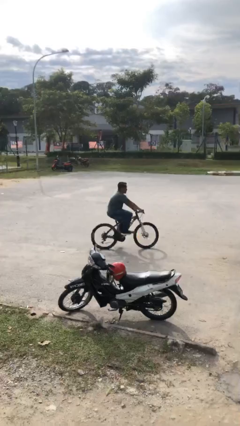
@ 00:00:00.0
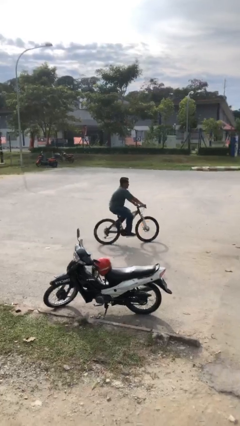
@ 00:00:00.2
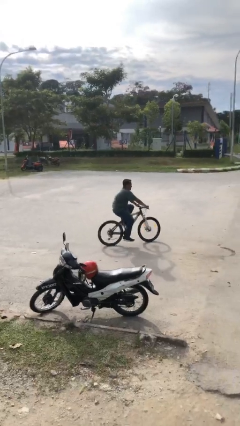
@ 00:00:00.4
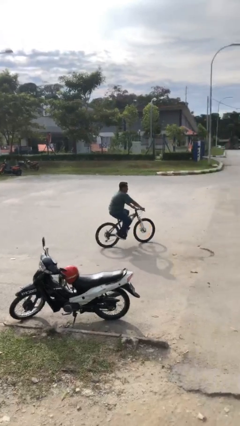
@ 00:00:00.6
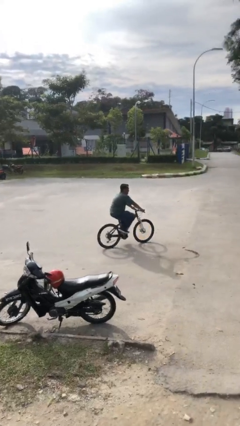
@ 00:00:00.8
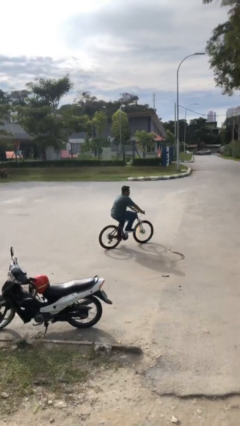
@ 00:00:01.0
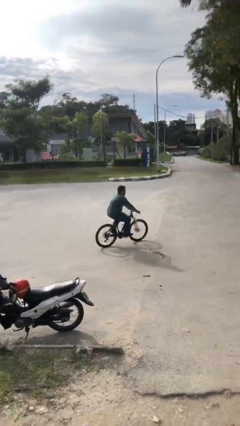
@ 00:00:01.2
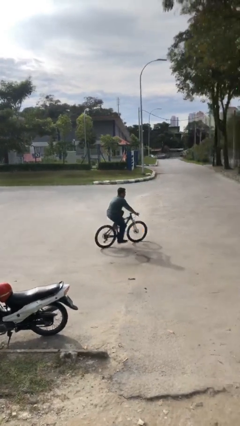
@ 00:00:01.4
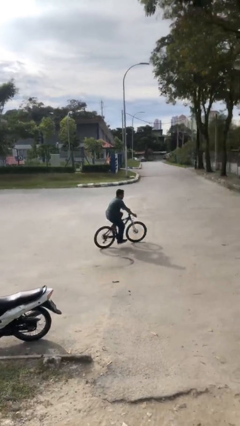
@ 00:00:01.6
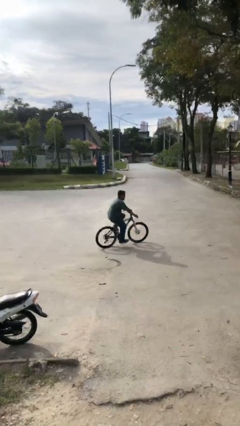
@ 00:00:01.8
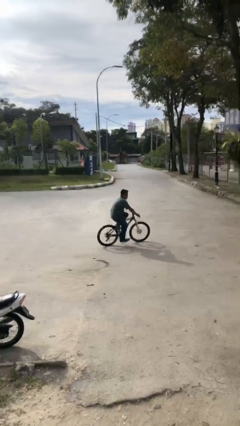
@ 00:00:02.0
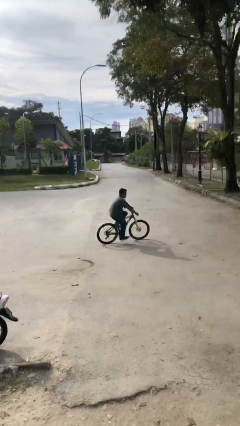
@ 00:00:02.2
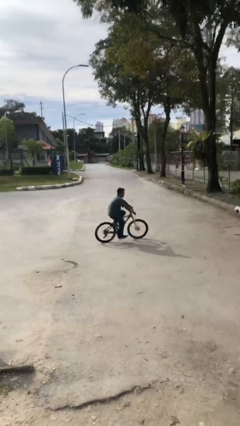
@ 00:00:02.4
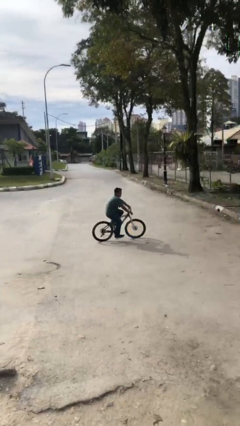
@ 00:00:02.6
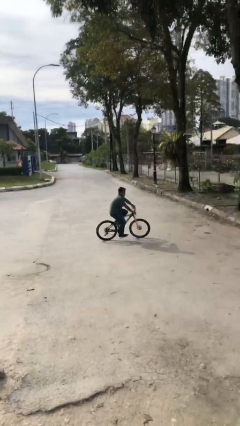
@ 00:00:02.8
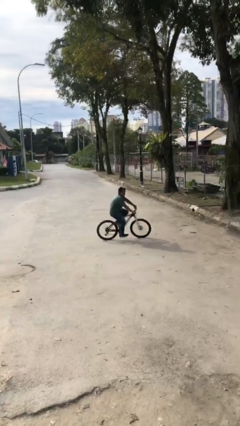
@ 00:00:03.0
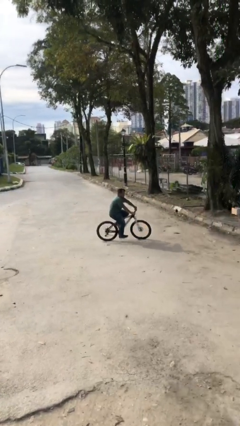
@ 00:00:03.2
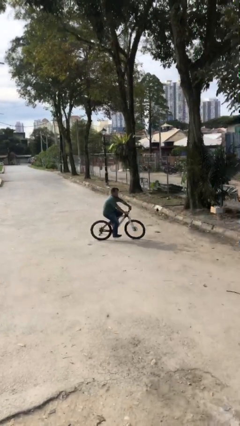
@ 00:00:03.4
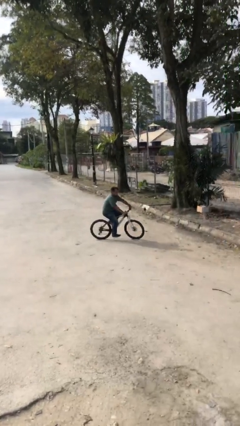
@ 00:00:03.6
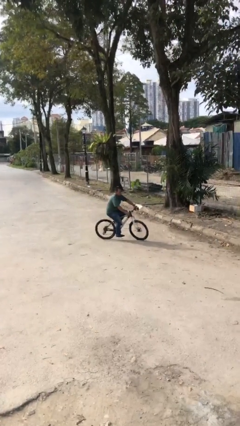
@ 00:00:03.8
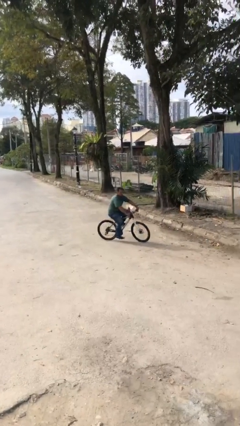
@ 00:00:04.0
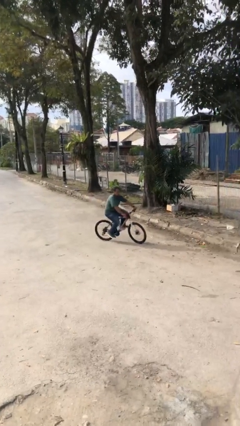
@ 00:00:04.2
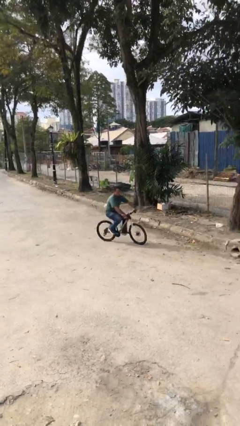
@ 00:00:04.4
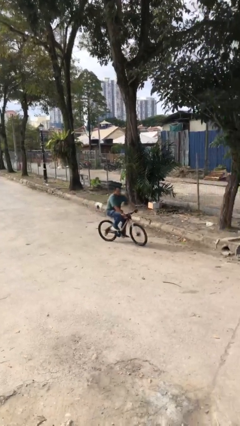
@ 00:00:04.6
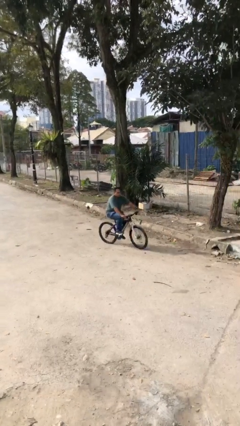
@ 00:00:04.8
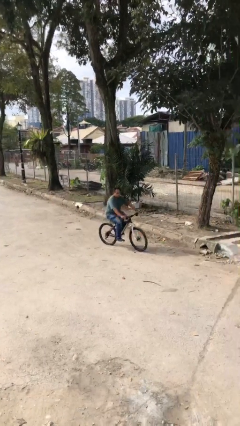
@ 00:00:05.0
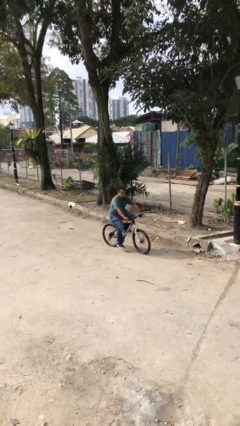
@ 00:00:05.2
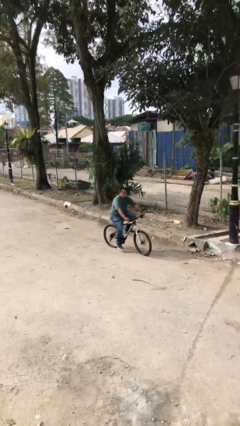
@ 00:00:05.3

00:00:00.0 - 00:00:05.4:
person rides bicycle

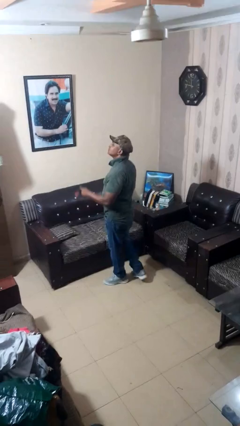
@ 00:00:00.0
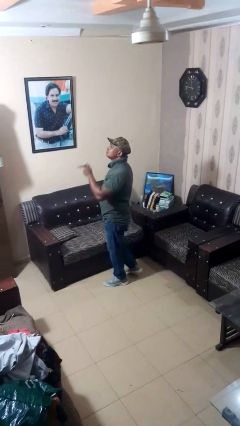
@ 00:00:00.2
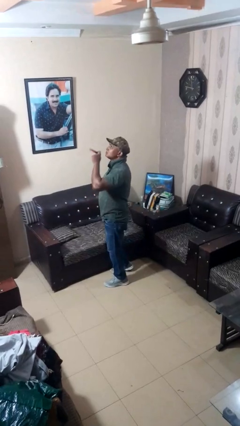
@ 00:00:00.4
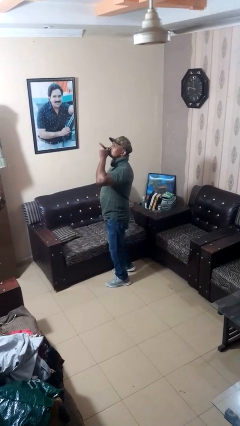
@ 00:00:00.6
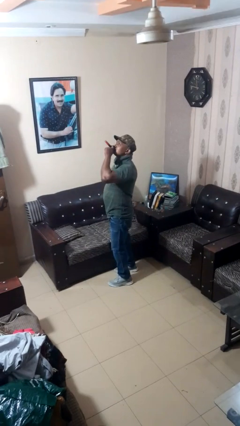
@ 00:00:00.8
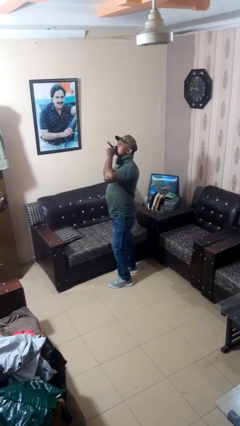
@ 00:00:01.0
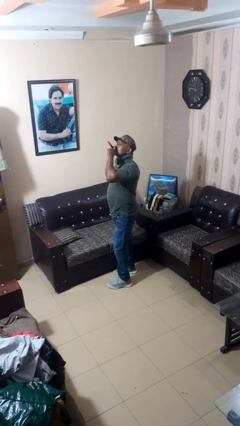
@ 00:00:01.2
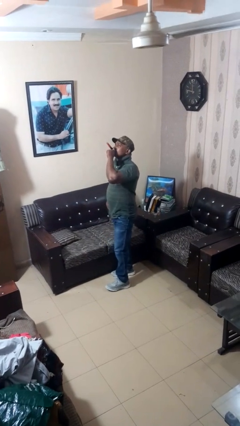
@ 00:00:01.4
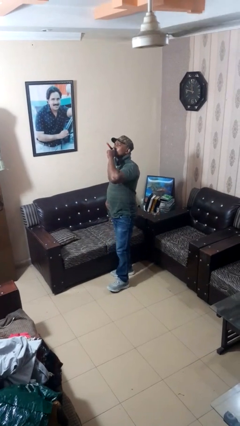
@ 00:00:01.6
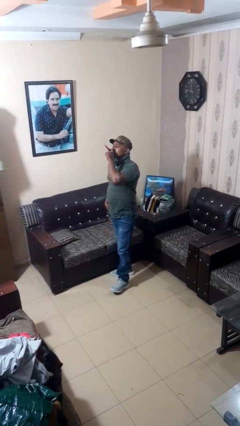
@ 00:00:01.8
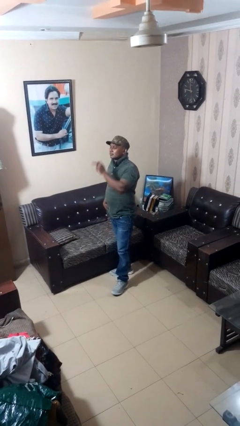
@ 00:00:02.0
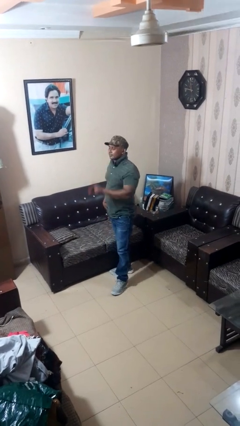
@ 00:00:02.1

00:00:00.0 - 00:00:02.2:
person vapes

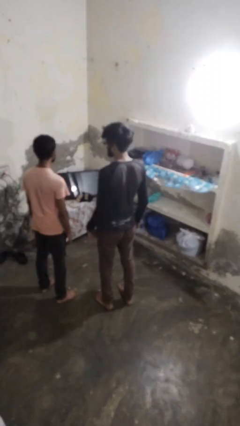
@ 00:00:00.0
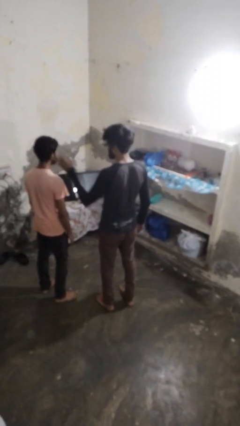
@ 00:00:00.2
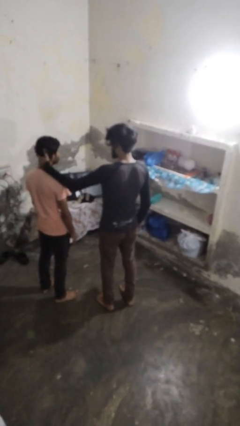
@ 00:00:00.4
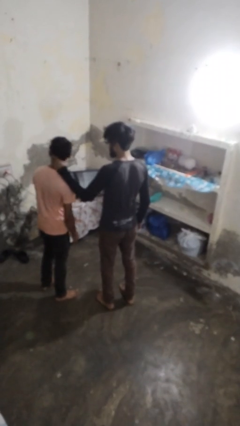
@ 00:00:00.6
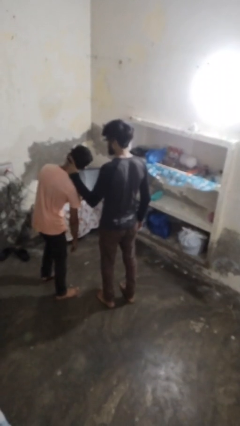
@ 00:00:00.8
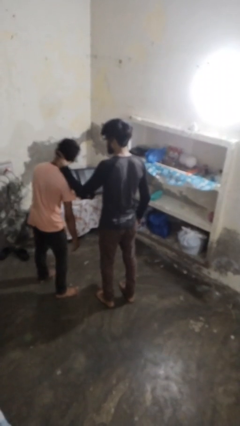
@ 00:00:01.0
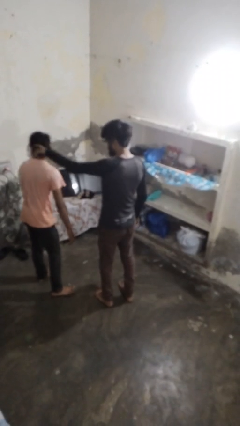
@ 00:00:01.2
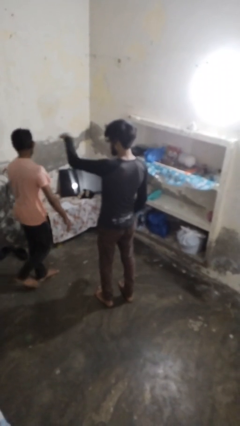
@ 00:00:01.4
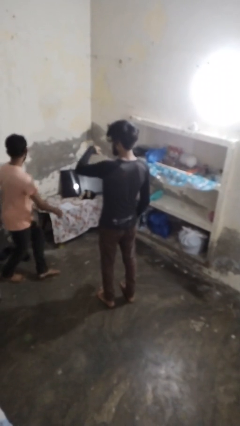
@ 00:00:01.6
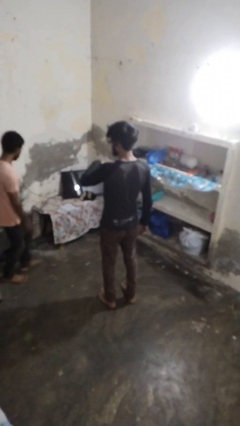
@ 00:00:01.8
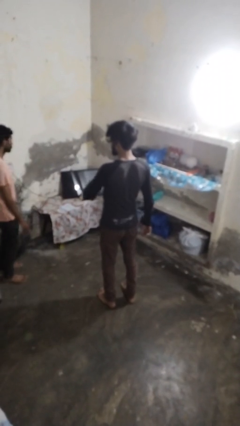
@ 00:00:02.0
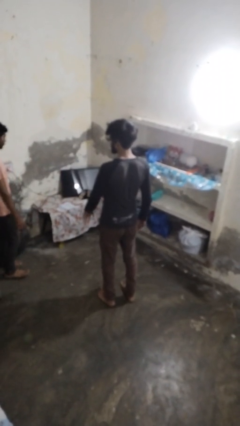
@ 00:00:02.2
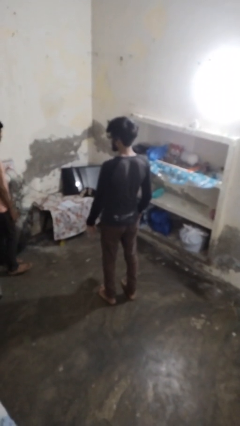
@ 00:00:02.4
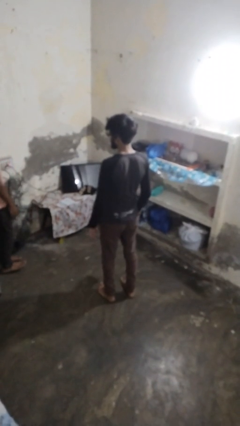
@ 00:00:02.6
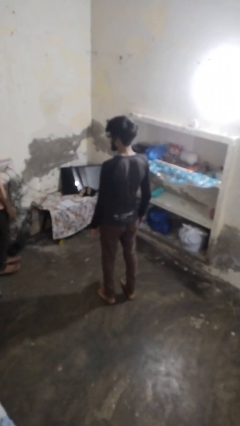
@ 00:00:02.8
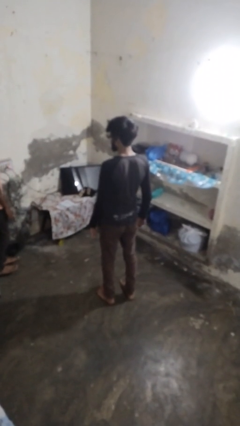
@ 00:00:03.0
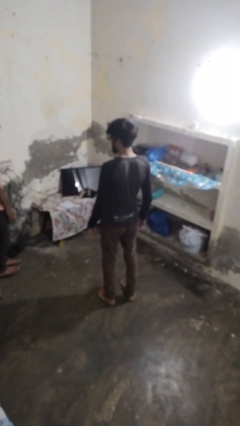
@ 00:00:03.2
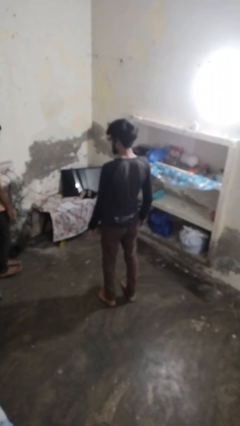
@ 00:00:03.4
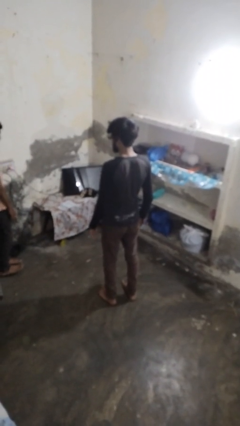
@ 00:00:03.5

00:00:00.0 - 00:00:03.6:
person shoves person

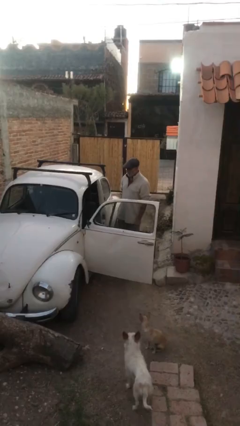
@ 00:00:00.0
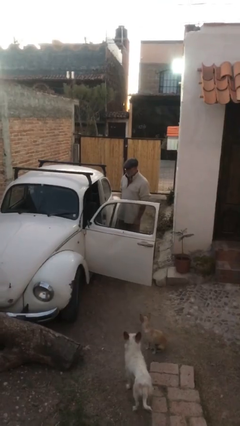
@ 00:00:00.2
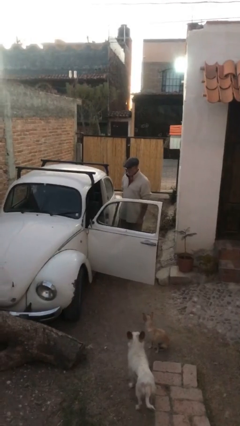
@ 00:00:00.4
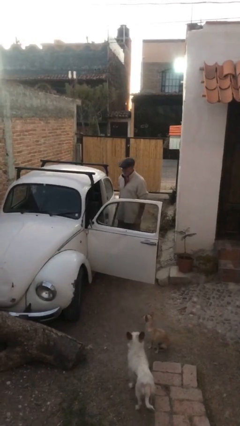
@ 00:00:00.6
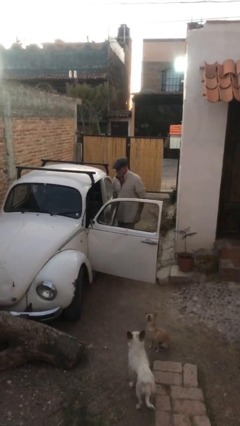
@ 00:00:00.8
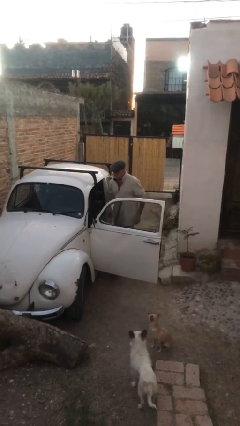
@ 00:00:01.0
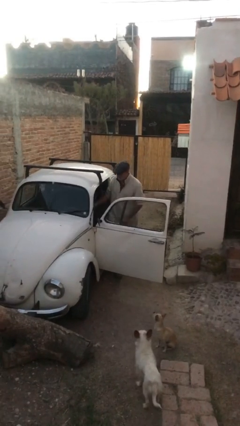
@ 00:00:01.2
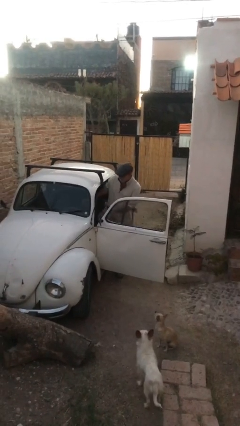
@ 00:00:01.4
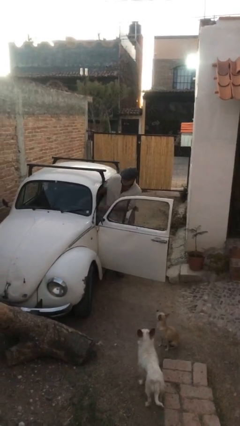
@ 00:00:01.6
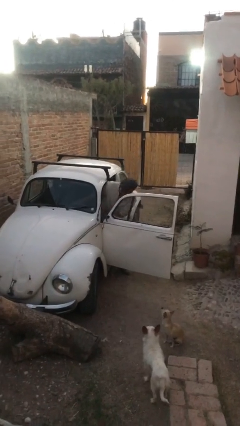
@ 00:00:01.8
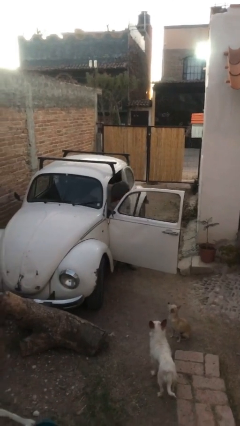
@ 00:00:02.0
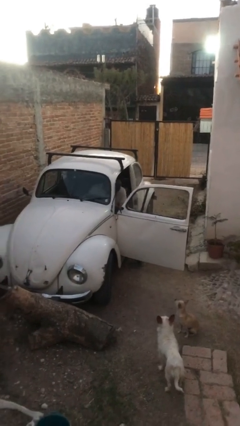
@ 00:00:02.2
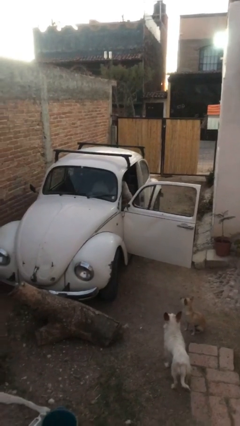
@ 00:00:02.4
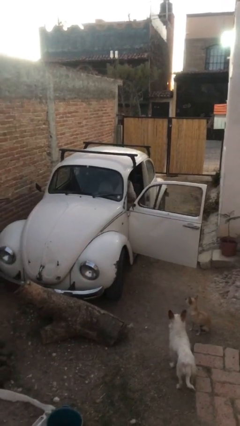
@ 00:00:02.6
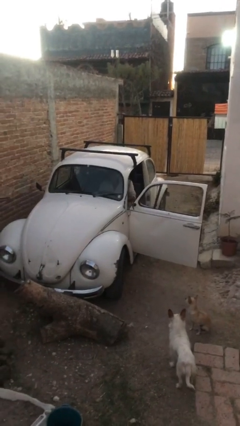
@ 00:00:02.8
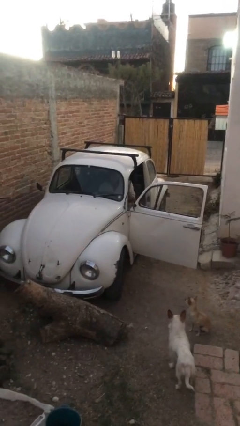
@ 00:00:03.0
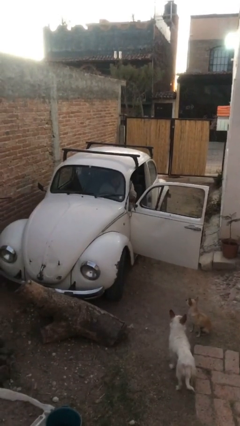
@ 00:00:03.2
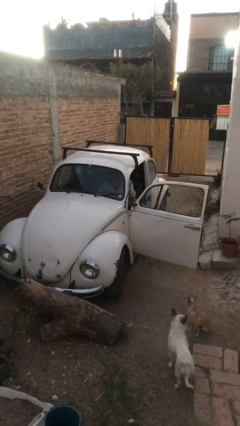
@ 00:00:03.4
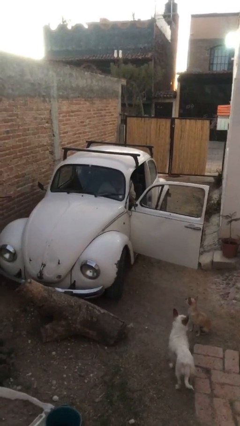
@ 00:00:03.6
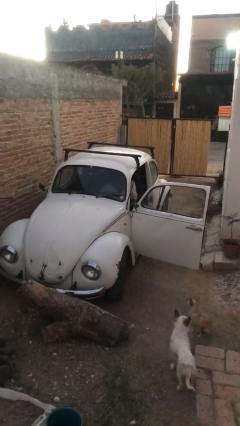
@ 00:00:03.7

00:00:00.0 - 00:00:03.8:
person enters car

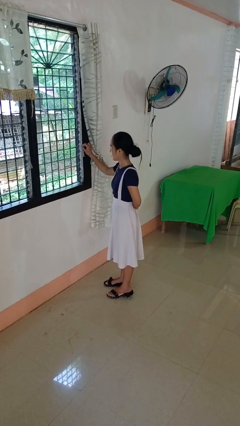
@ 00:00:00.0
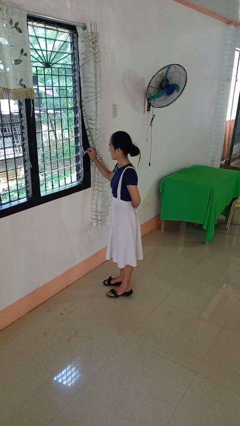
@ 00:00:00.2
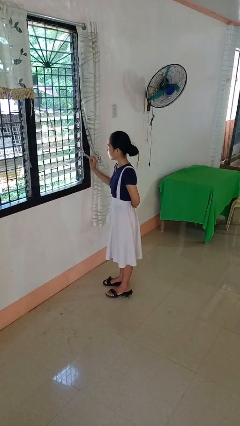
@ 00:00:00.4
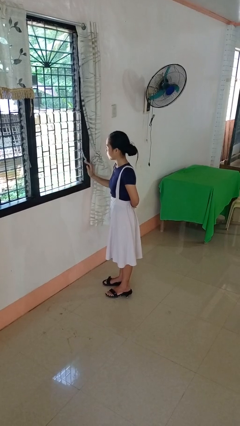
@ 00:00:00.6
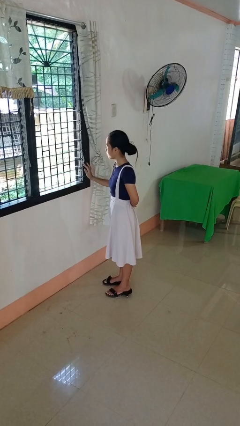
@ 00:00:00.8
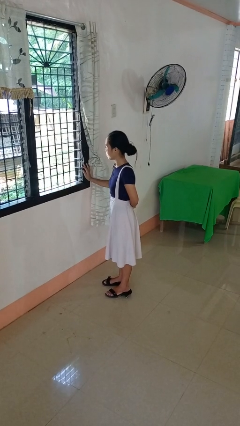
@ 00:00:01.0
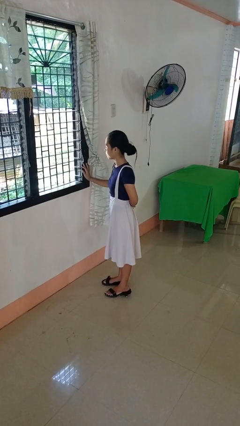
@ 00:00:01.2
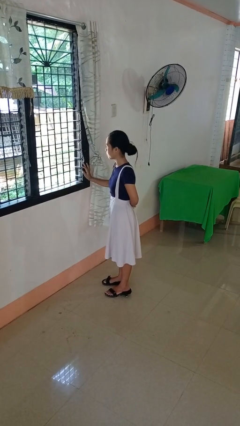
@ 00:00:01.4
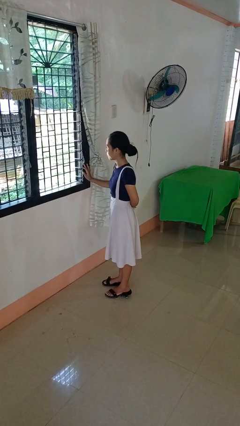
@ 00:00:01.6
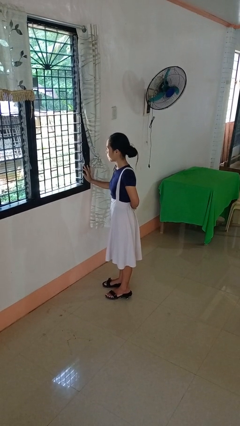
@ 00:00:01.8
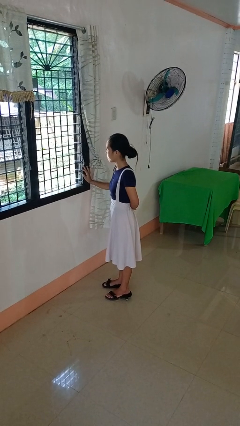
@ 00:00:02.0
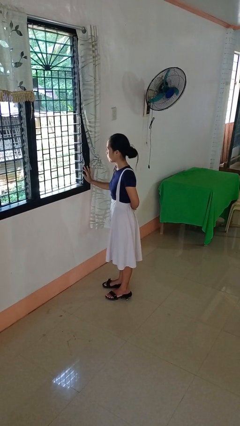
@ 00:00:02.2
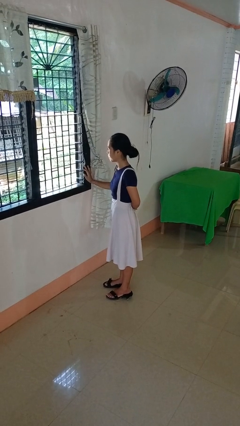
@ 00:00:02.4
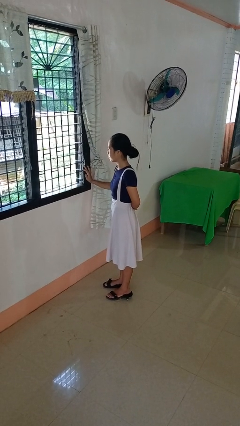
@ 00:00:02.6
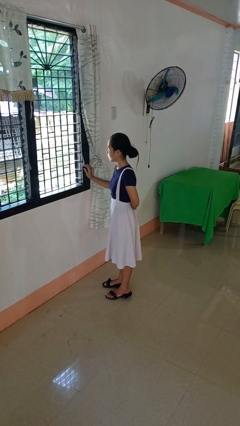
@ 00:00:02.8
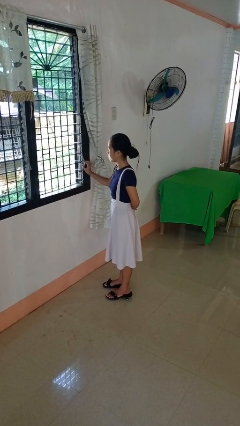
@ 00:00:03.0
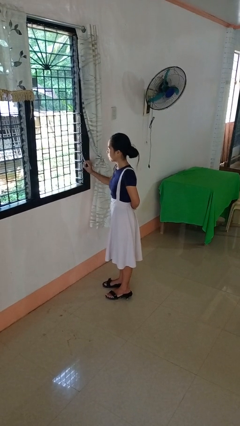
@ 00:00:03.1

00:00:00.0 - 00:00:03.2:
person opens home window
